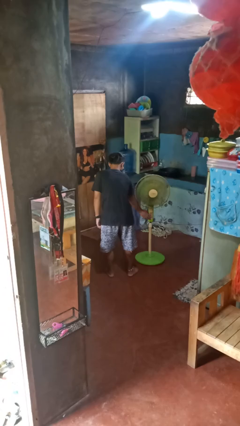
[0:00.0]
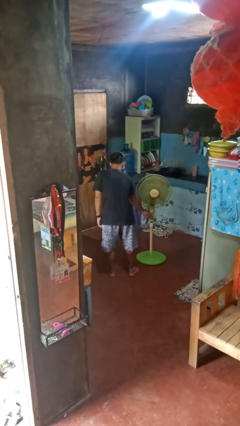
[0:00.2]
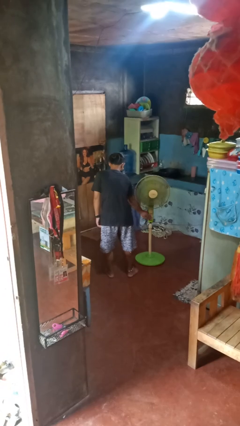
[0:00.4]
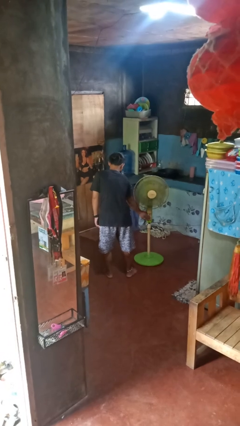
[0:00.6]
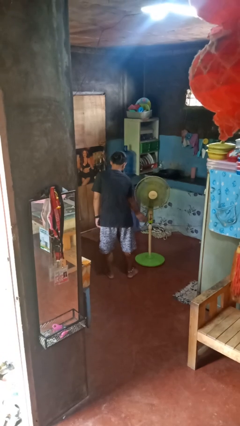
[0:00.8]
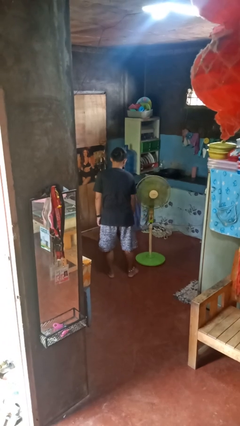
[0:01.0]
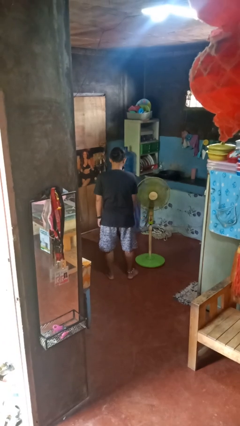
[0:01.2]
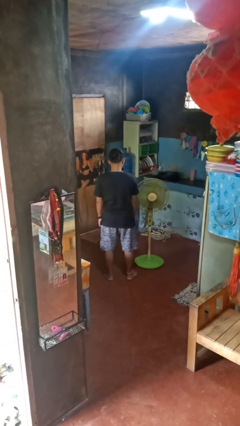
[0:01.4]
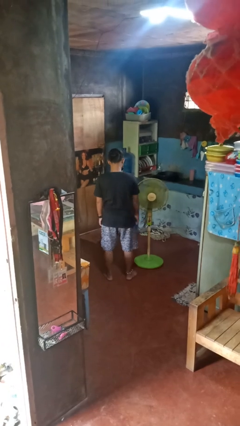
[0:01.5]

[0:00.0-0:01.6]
person turns off fan

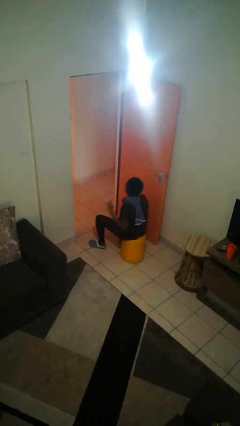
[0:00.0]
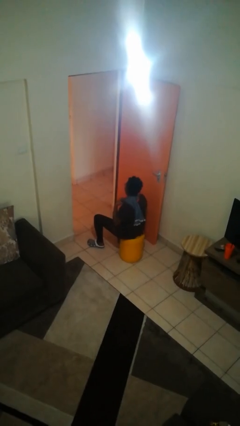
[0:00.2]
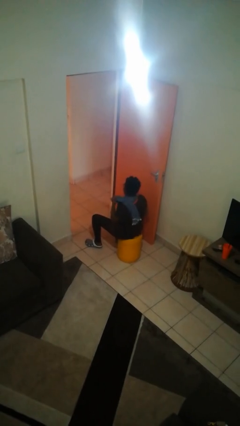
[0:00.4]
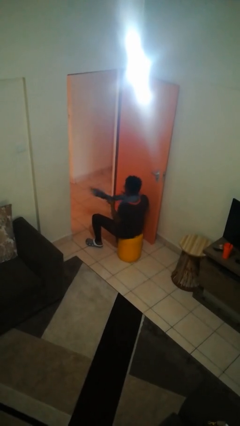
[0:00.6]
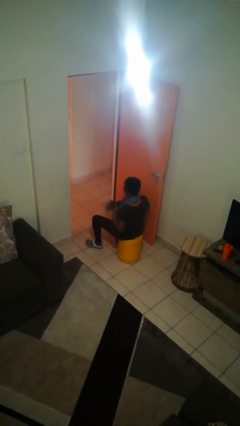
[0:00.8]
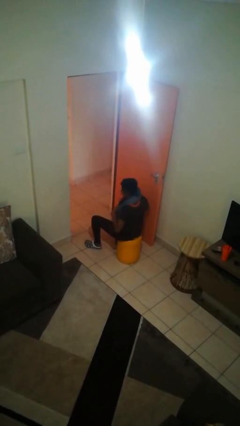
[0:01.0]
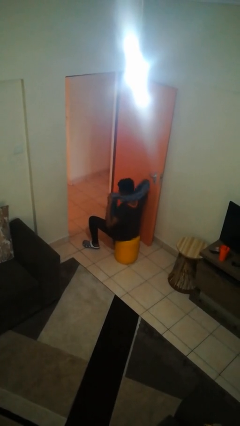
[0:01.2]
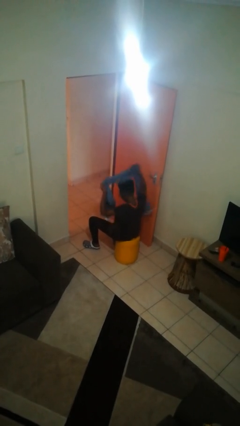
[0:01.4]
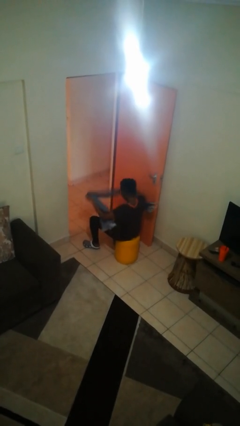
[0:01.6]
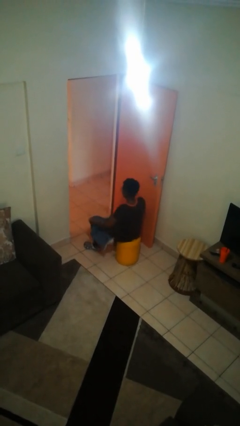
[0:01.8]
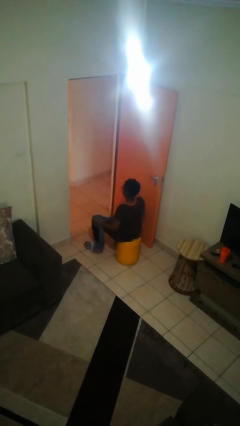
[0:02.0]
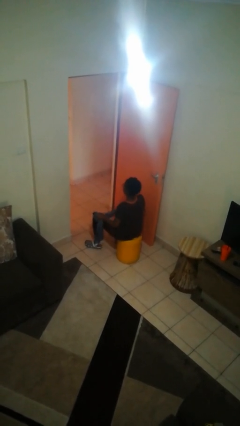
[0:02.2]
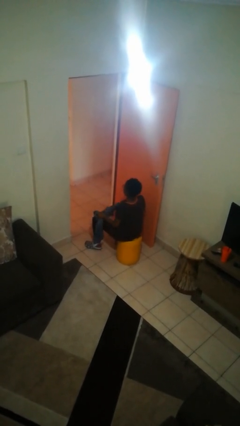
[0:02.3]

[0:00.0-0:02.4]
person takes off scarf

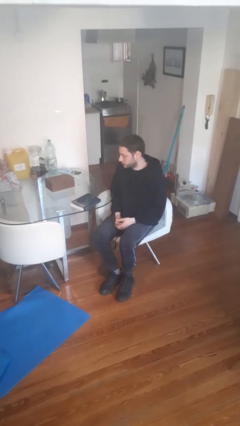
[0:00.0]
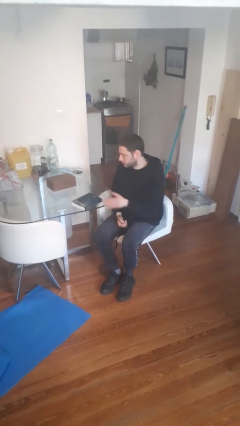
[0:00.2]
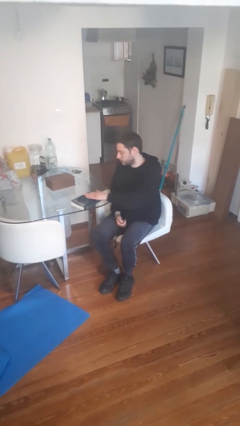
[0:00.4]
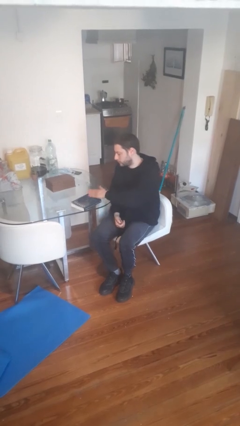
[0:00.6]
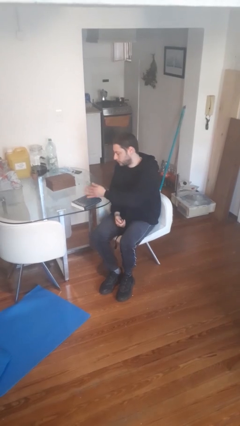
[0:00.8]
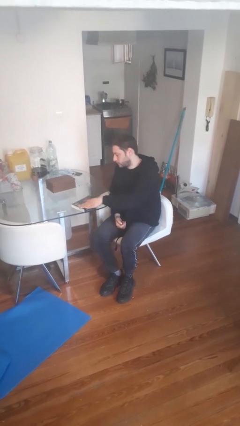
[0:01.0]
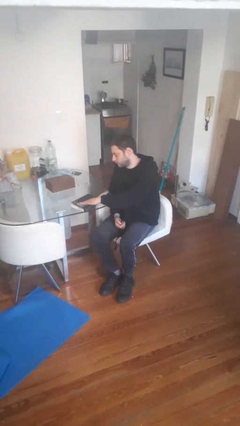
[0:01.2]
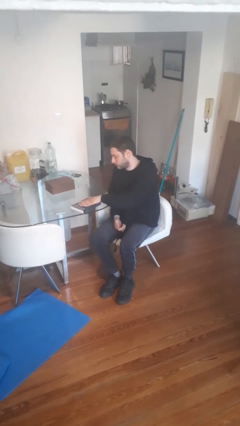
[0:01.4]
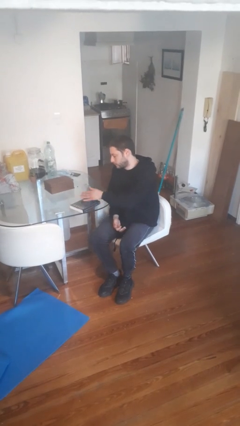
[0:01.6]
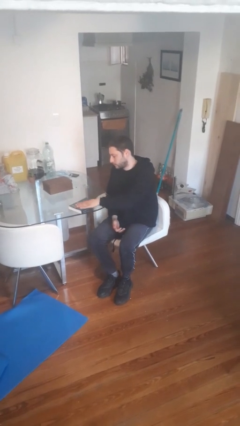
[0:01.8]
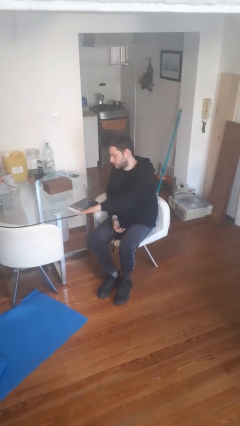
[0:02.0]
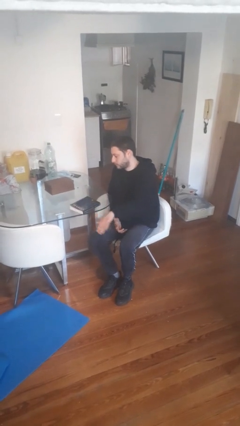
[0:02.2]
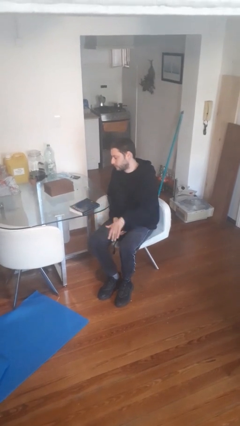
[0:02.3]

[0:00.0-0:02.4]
person waves hand over object

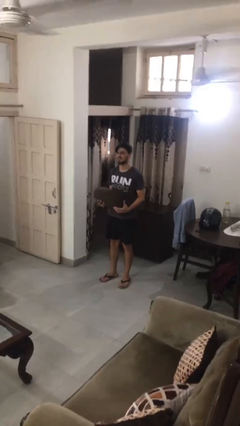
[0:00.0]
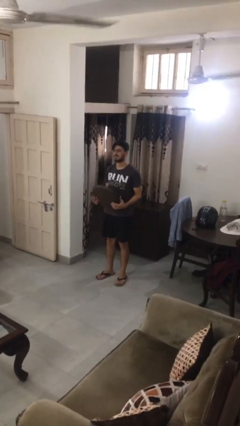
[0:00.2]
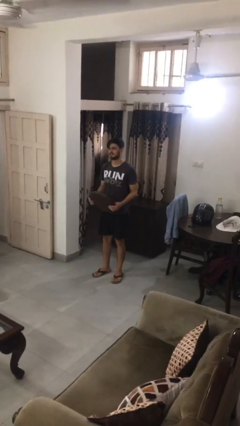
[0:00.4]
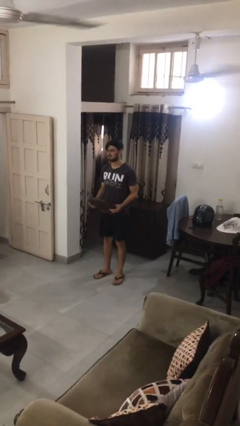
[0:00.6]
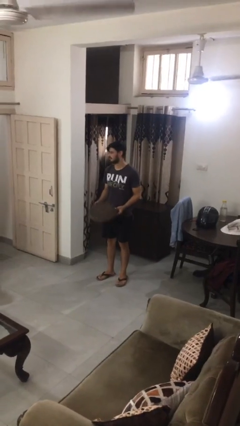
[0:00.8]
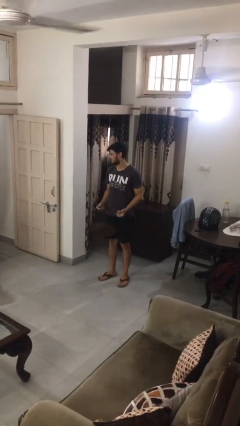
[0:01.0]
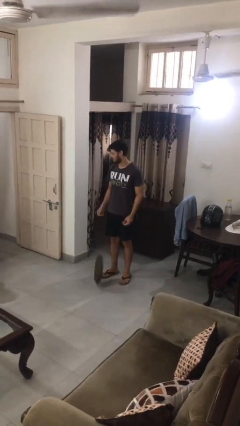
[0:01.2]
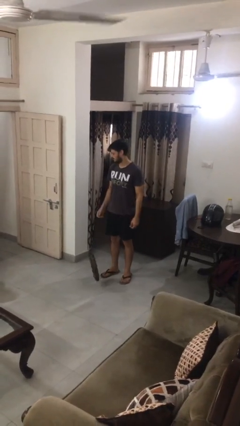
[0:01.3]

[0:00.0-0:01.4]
person drops object

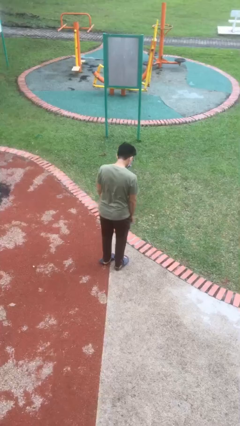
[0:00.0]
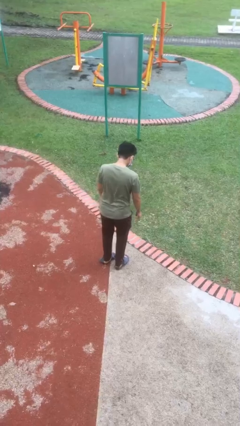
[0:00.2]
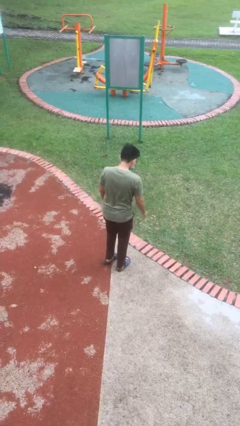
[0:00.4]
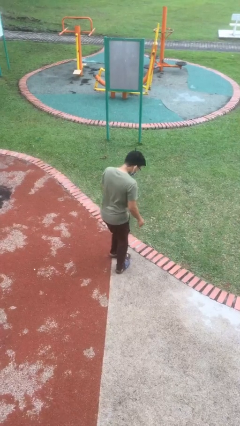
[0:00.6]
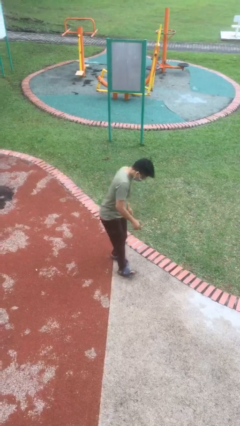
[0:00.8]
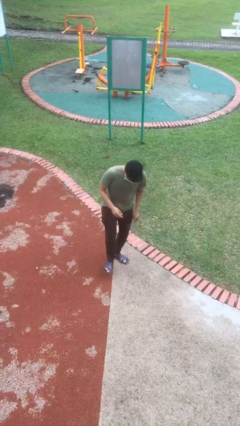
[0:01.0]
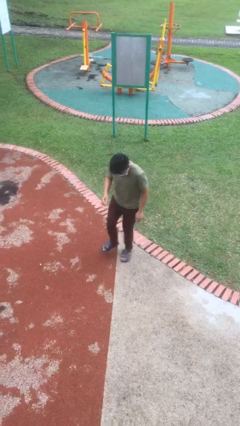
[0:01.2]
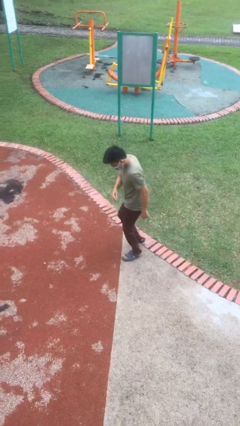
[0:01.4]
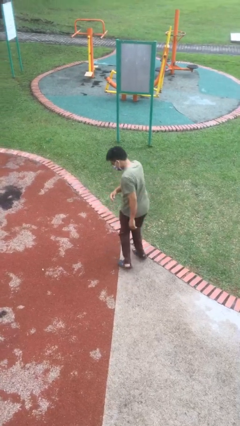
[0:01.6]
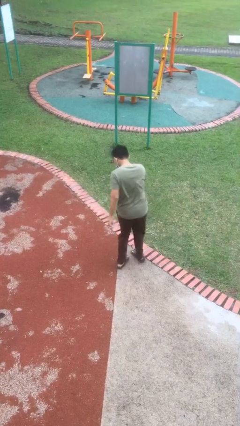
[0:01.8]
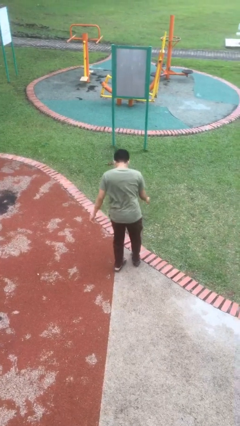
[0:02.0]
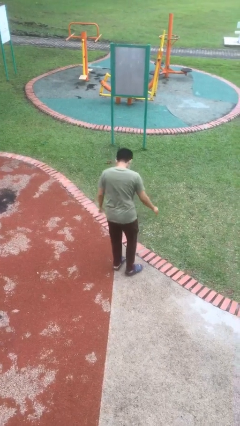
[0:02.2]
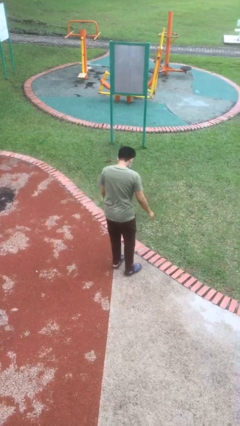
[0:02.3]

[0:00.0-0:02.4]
person twirls

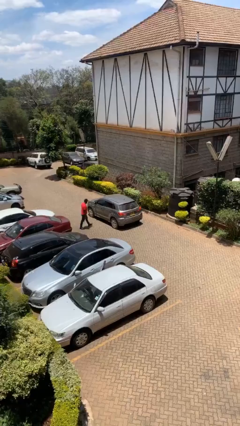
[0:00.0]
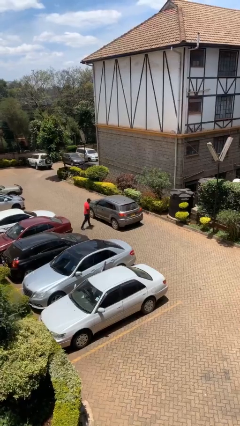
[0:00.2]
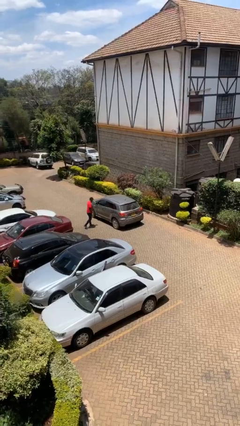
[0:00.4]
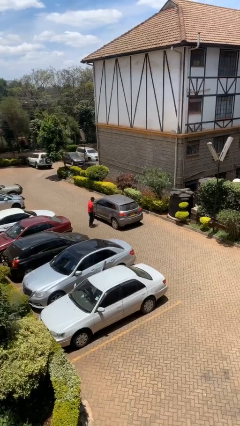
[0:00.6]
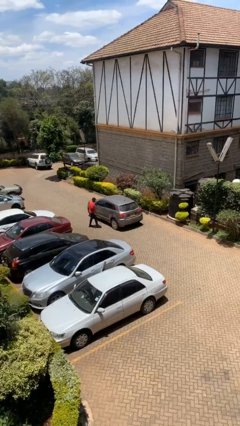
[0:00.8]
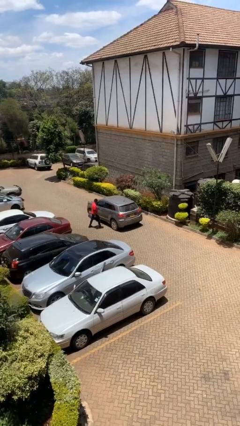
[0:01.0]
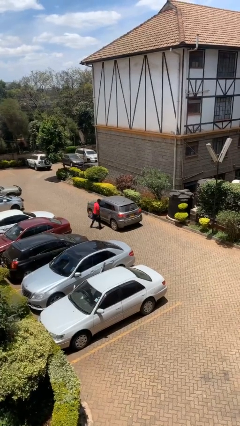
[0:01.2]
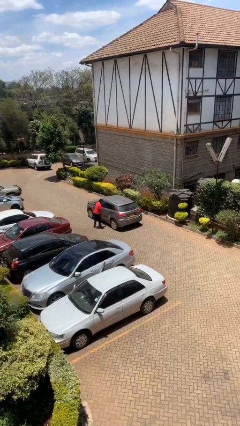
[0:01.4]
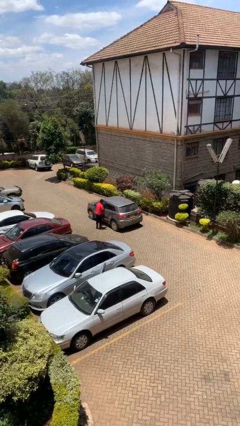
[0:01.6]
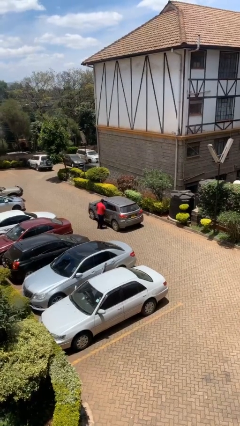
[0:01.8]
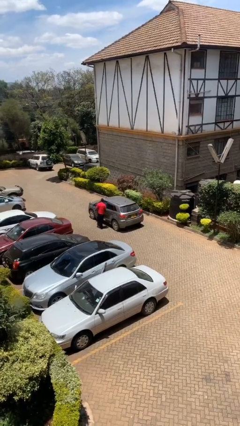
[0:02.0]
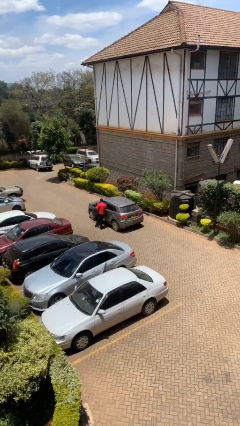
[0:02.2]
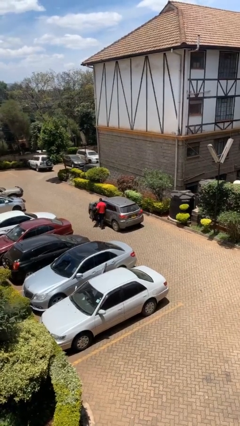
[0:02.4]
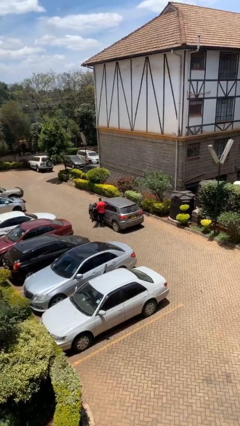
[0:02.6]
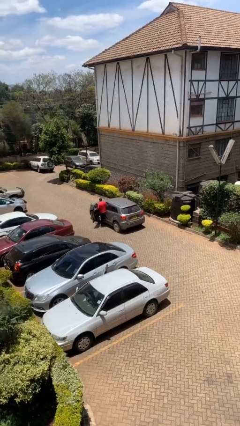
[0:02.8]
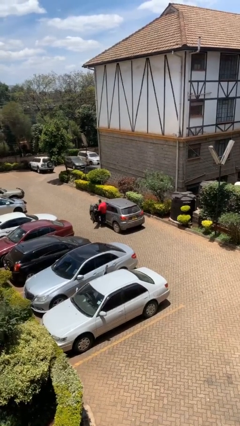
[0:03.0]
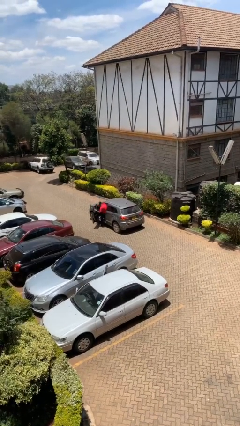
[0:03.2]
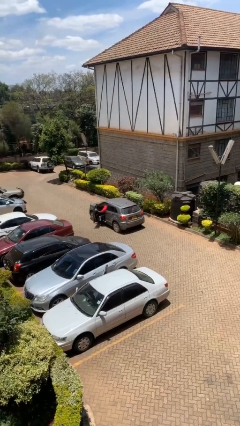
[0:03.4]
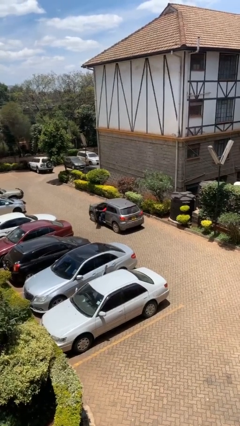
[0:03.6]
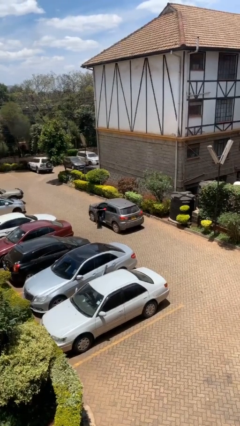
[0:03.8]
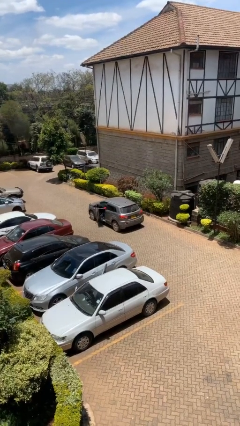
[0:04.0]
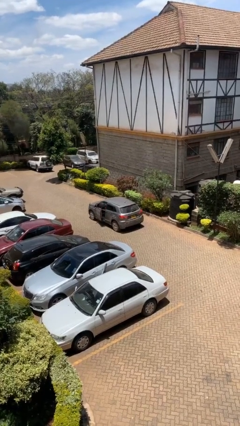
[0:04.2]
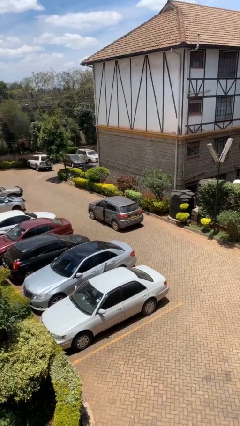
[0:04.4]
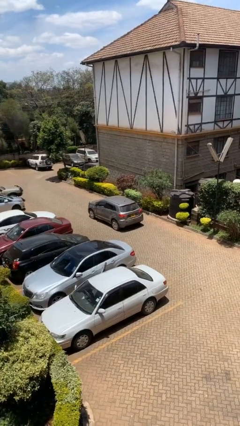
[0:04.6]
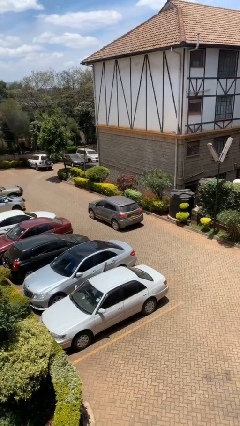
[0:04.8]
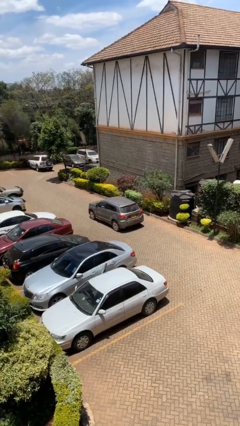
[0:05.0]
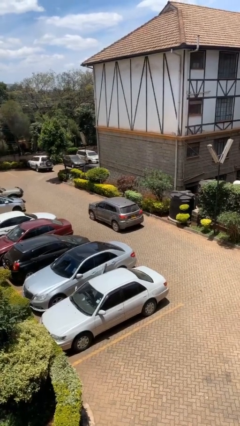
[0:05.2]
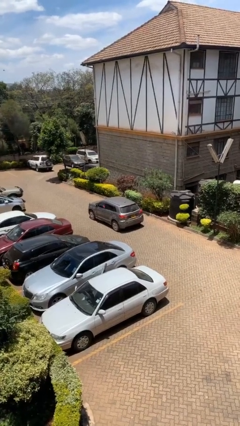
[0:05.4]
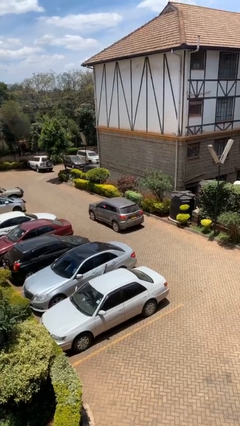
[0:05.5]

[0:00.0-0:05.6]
car picks up person

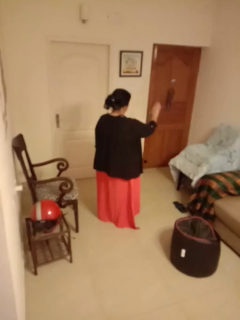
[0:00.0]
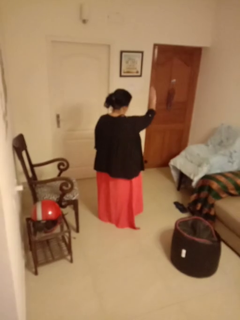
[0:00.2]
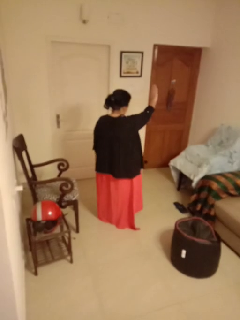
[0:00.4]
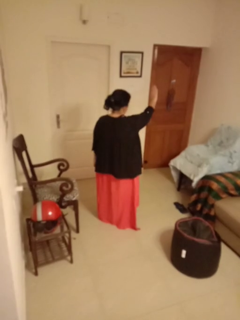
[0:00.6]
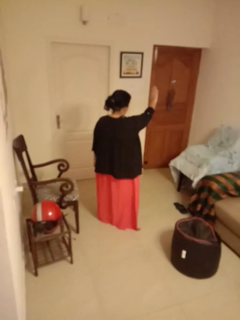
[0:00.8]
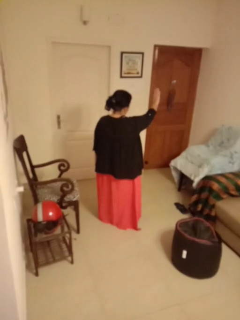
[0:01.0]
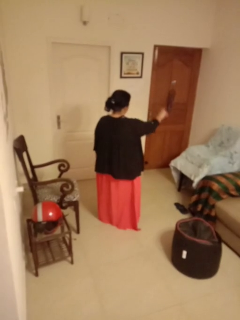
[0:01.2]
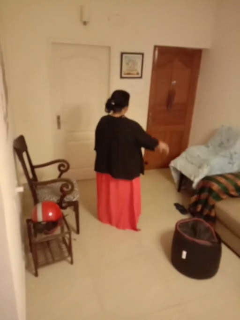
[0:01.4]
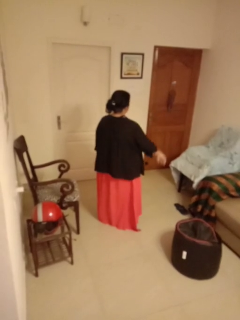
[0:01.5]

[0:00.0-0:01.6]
person gestures stop

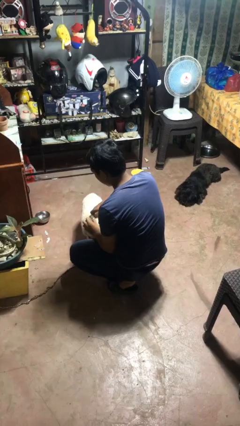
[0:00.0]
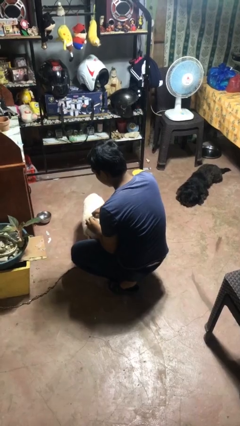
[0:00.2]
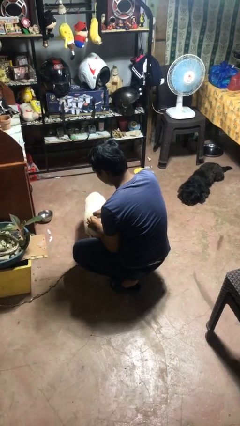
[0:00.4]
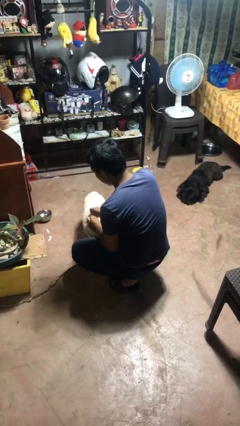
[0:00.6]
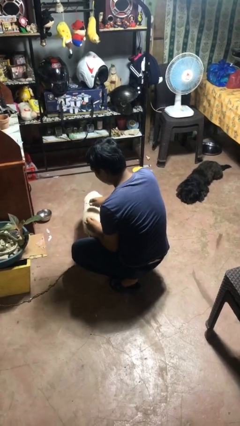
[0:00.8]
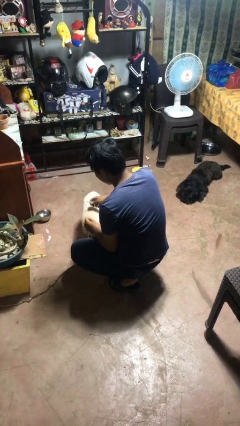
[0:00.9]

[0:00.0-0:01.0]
person unattaches leash from dog
